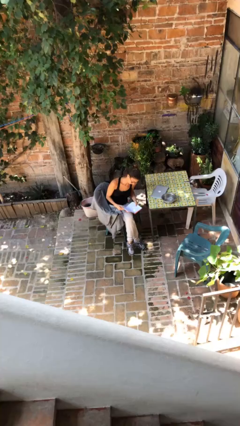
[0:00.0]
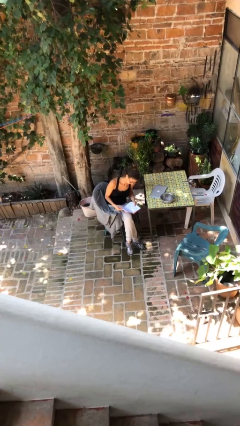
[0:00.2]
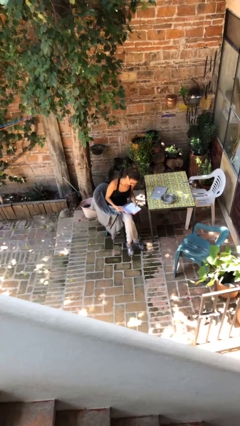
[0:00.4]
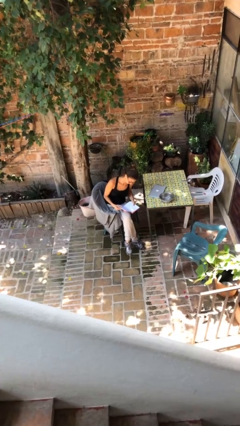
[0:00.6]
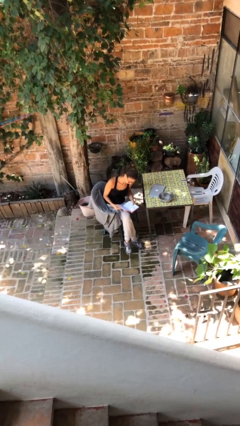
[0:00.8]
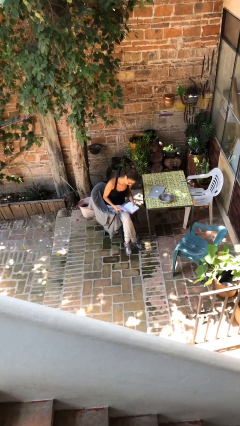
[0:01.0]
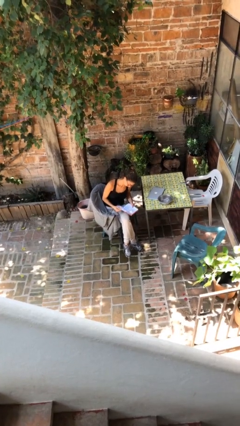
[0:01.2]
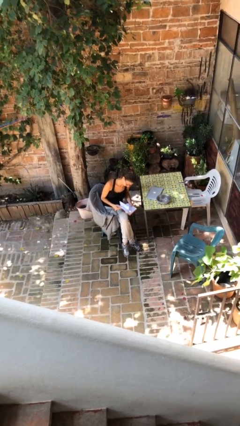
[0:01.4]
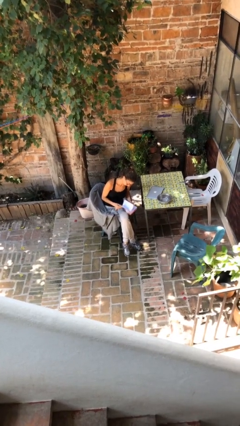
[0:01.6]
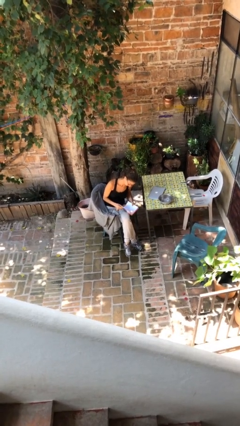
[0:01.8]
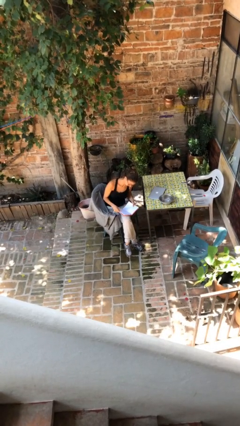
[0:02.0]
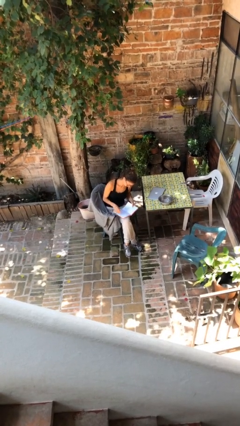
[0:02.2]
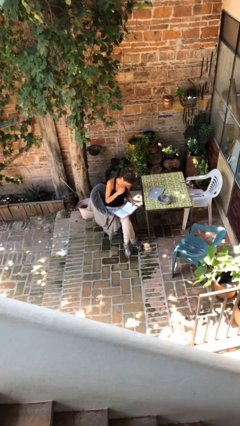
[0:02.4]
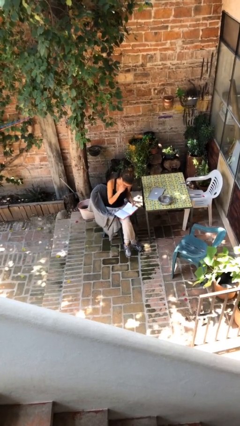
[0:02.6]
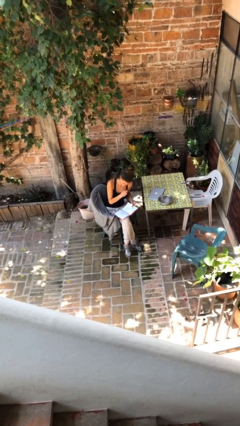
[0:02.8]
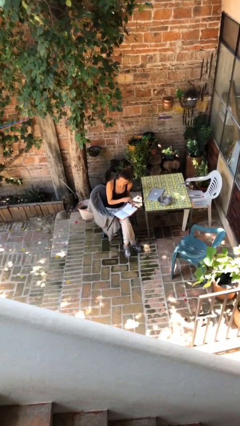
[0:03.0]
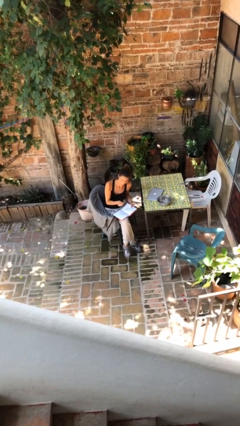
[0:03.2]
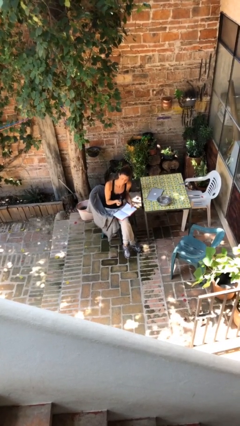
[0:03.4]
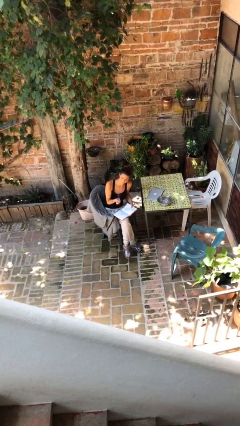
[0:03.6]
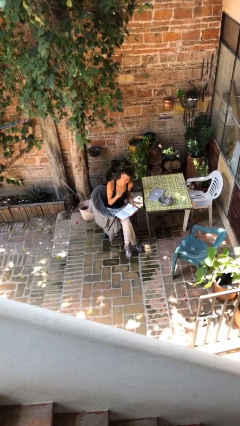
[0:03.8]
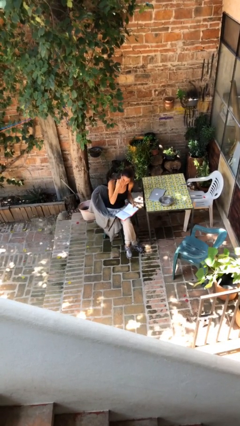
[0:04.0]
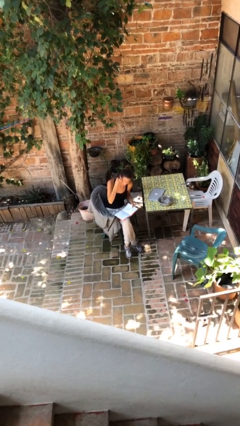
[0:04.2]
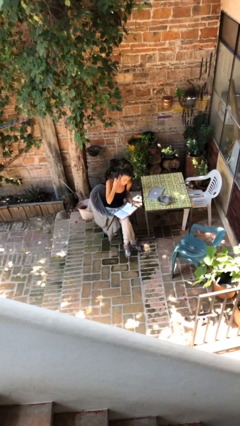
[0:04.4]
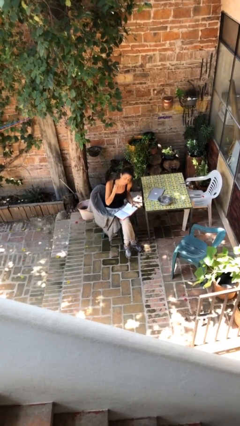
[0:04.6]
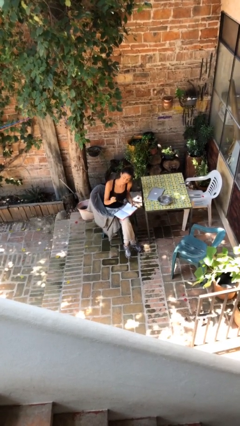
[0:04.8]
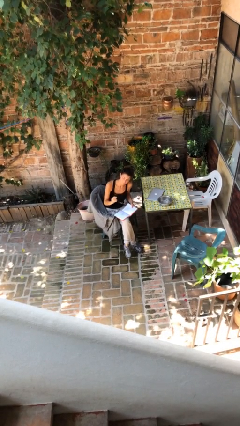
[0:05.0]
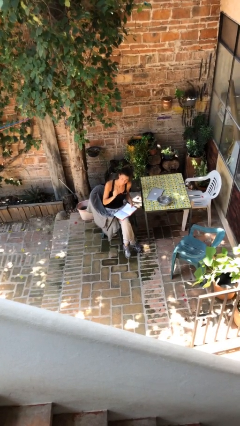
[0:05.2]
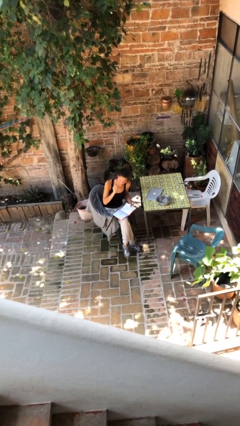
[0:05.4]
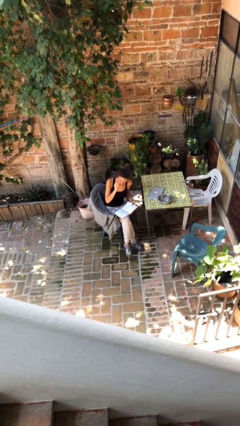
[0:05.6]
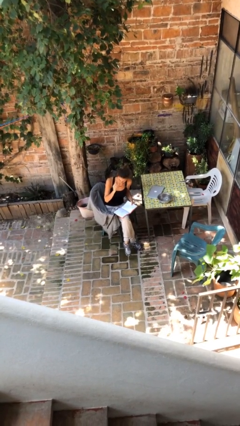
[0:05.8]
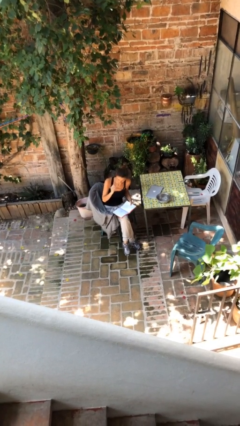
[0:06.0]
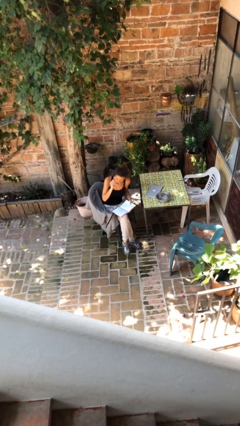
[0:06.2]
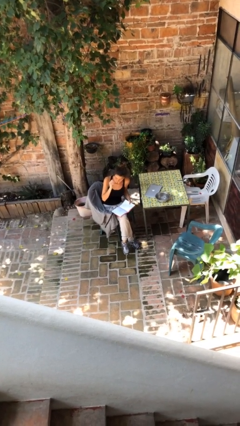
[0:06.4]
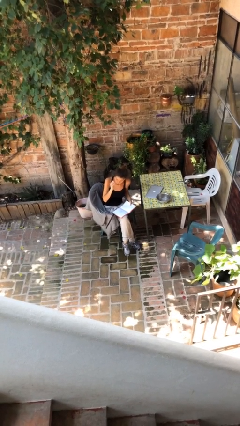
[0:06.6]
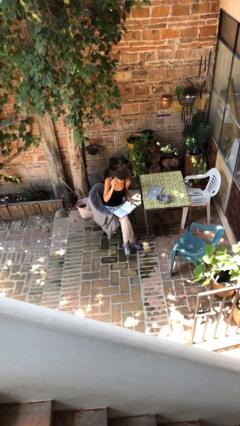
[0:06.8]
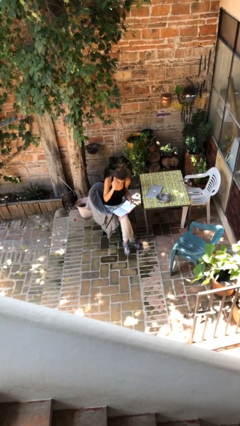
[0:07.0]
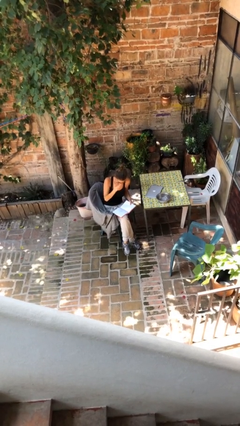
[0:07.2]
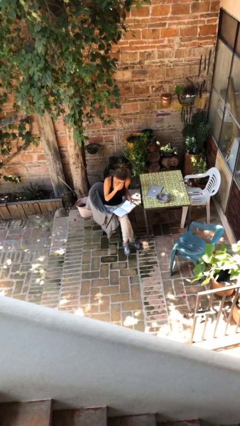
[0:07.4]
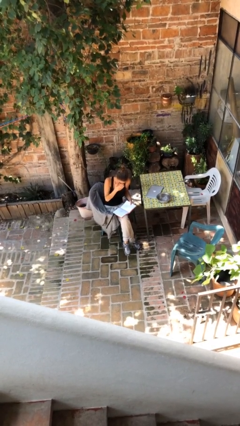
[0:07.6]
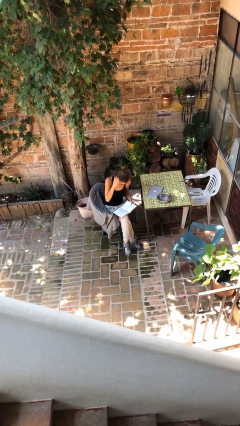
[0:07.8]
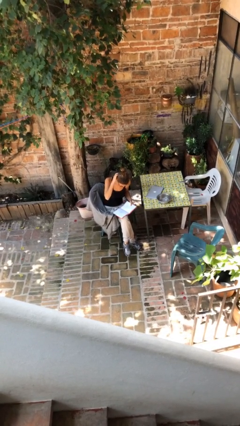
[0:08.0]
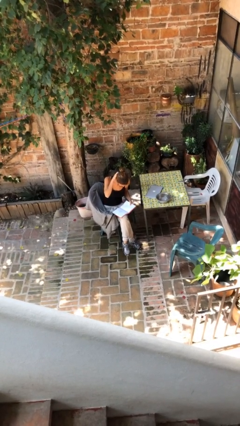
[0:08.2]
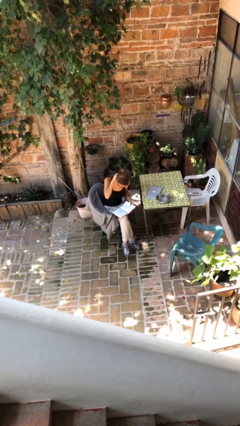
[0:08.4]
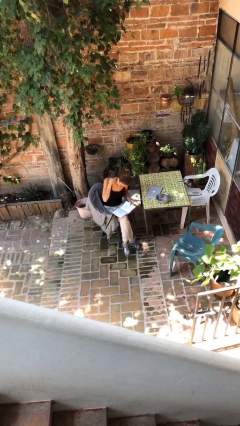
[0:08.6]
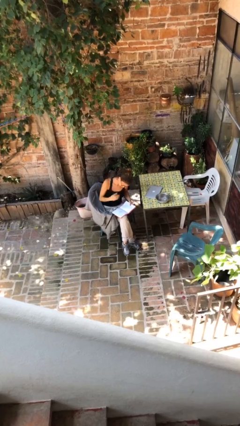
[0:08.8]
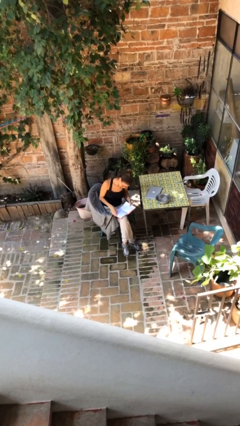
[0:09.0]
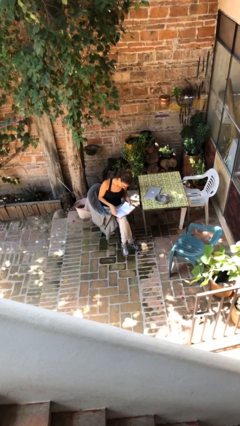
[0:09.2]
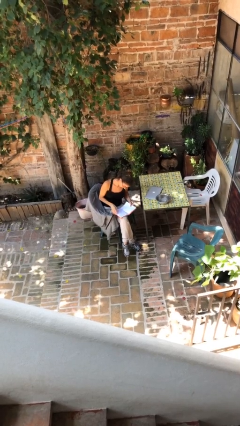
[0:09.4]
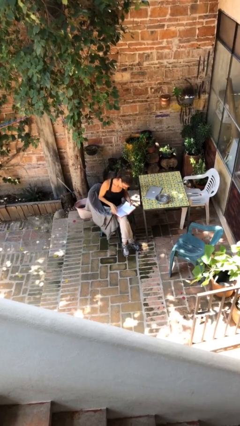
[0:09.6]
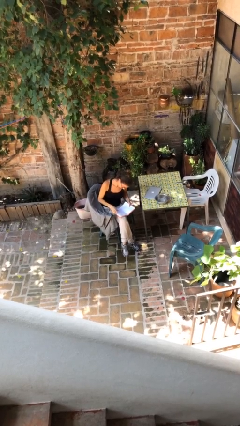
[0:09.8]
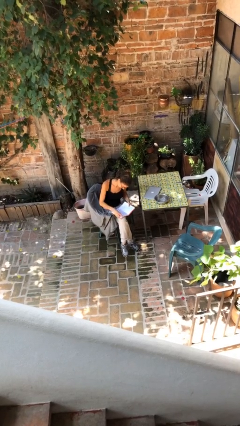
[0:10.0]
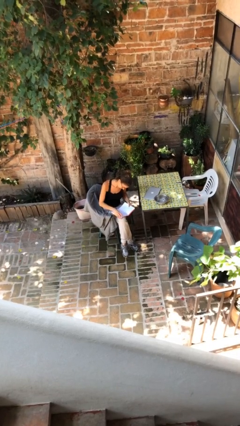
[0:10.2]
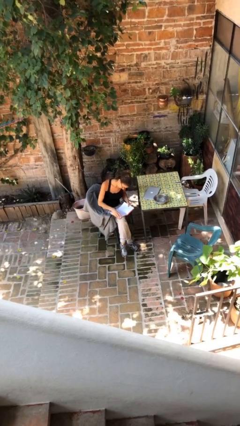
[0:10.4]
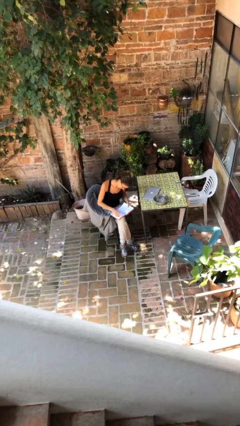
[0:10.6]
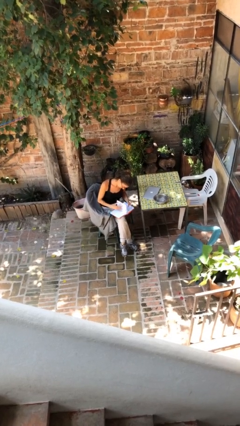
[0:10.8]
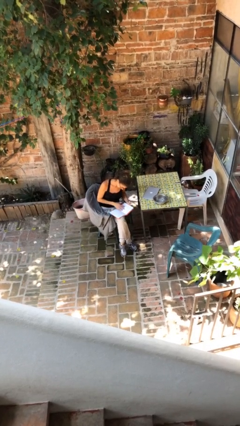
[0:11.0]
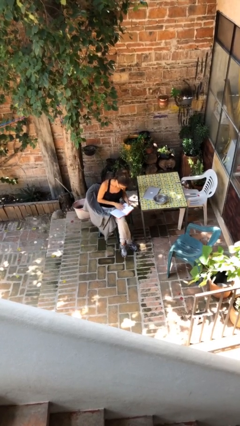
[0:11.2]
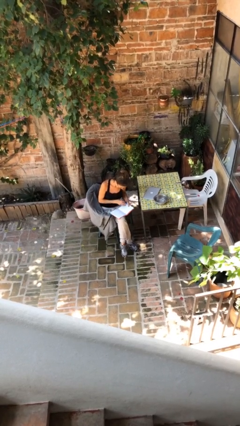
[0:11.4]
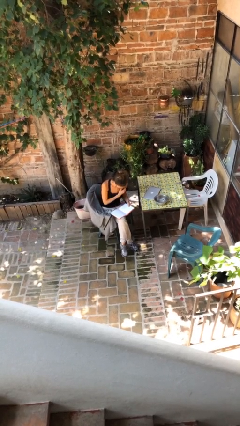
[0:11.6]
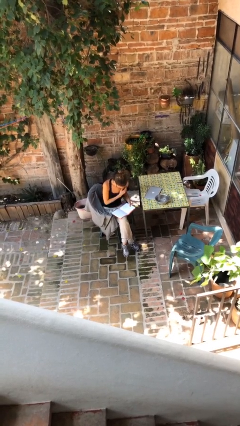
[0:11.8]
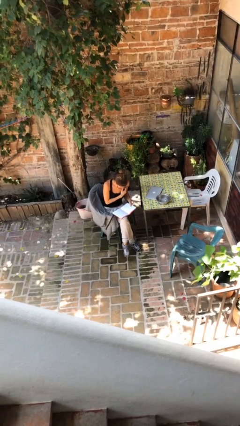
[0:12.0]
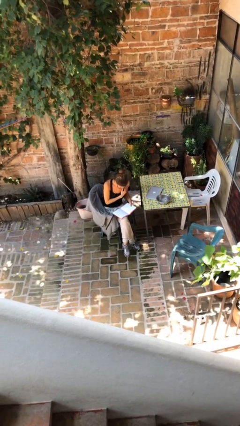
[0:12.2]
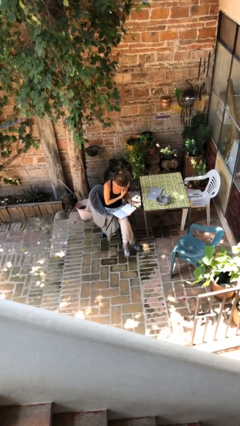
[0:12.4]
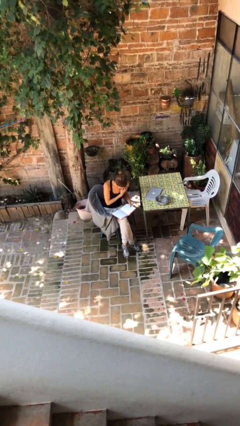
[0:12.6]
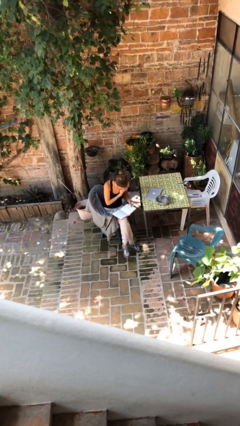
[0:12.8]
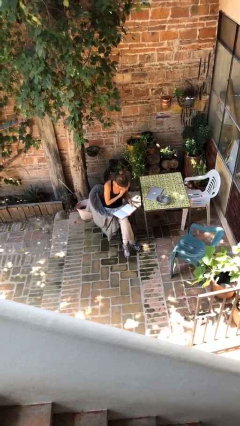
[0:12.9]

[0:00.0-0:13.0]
person reads document

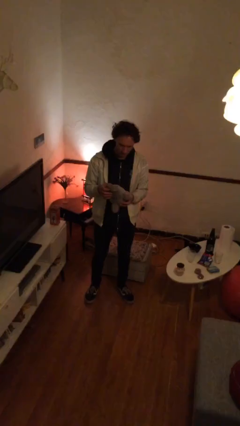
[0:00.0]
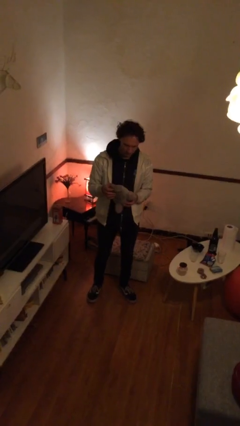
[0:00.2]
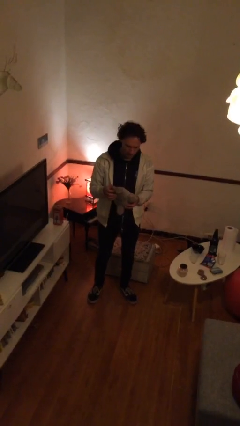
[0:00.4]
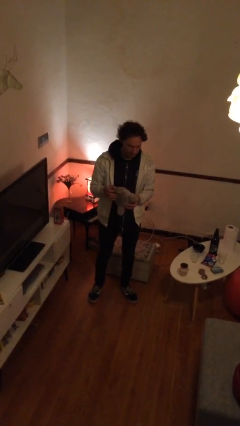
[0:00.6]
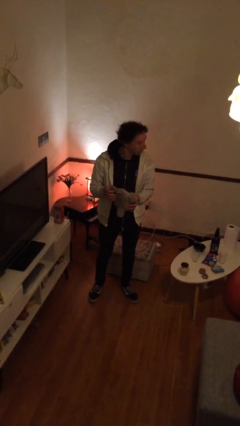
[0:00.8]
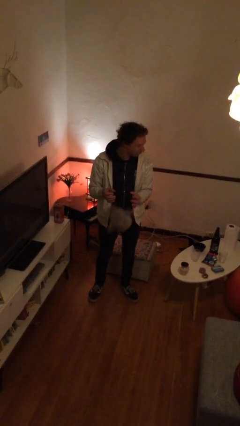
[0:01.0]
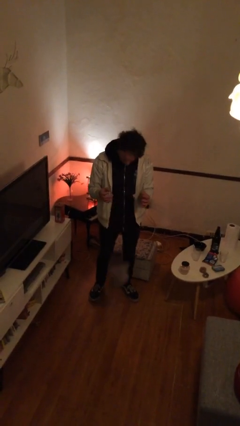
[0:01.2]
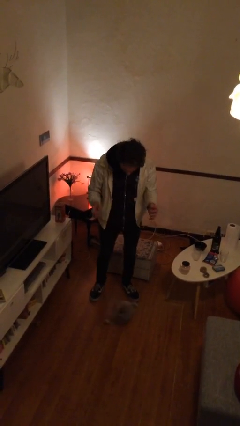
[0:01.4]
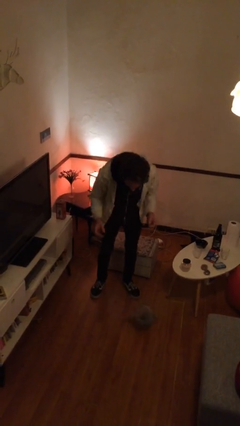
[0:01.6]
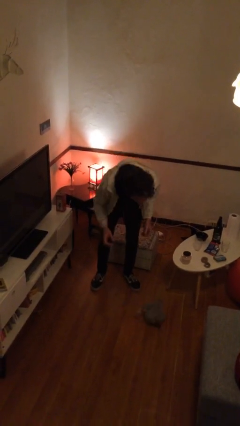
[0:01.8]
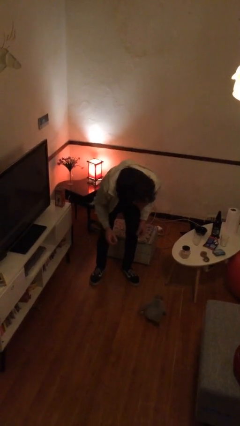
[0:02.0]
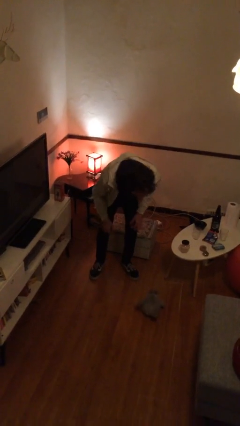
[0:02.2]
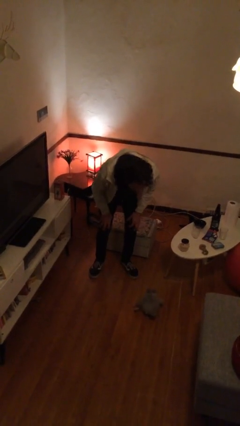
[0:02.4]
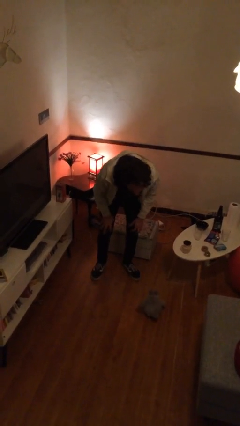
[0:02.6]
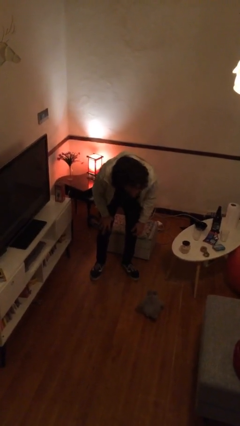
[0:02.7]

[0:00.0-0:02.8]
person drops object

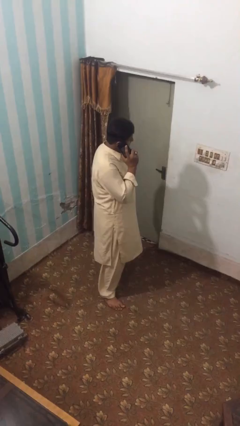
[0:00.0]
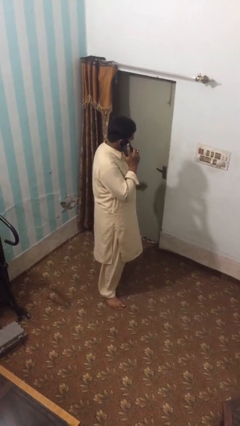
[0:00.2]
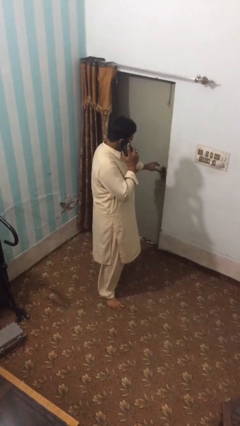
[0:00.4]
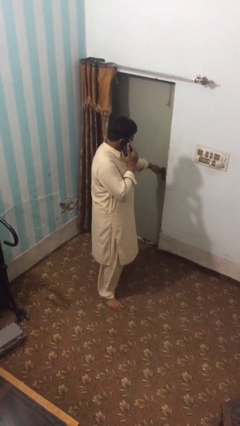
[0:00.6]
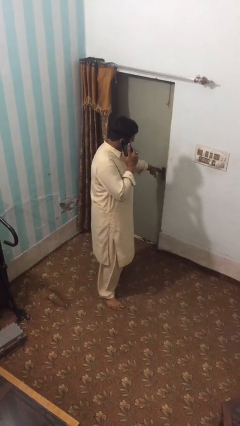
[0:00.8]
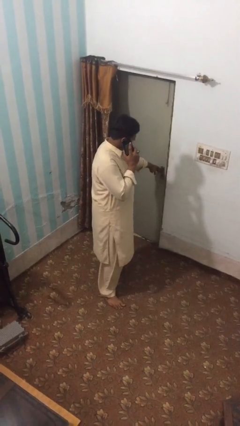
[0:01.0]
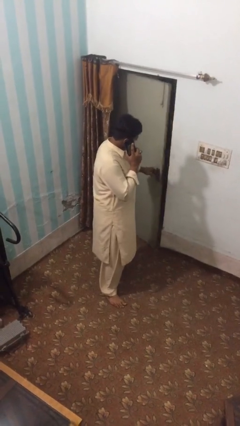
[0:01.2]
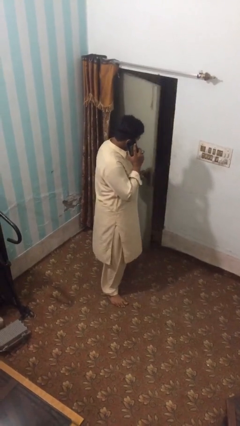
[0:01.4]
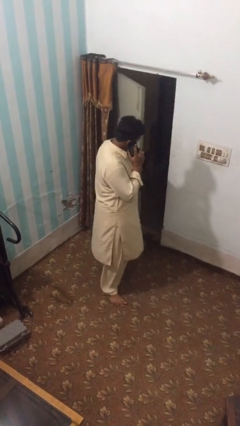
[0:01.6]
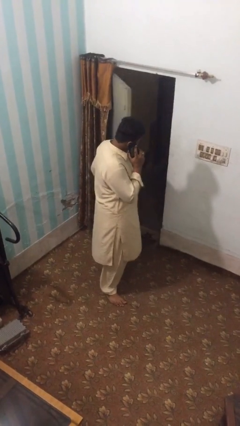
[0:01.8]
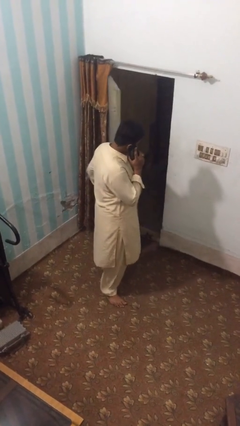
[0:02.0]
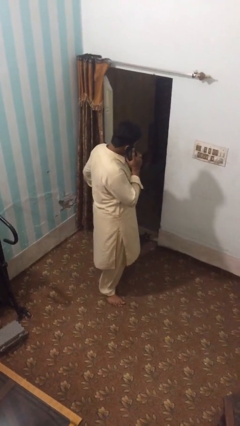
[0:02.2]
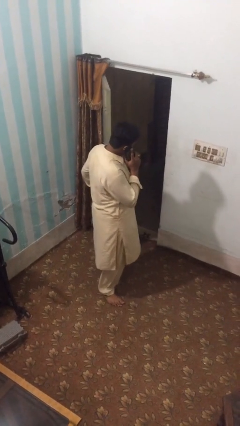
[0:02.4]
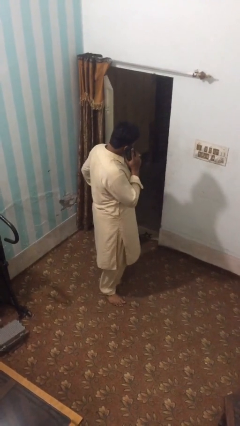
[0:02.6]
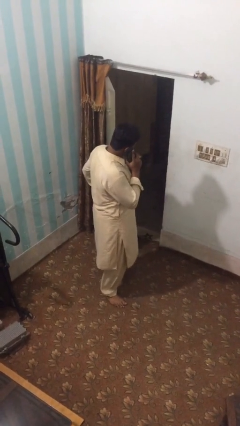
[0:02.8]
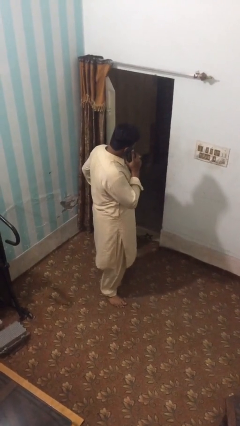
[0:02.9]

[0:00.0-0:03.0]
person opens facility door
